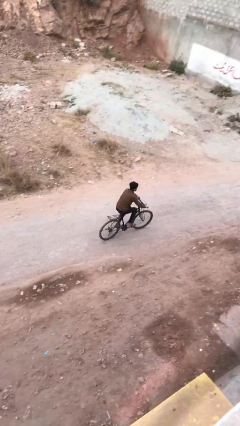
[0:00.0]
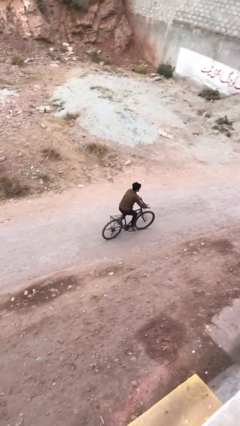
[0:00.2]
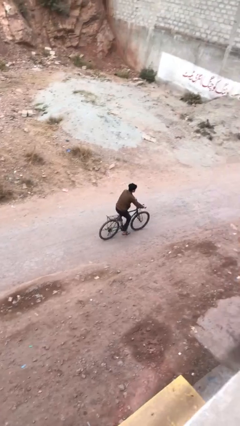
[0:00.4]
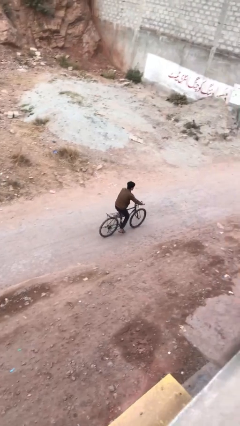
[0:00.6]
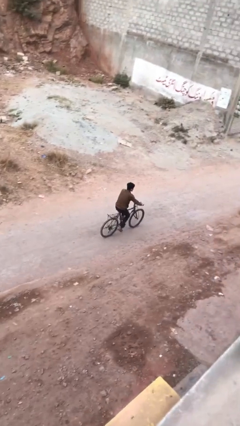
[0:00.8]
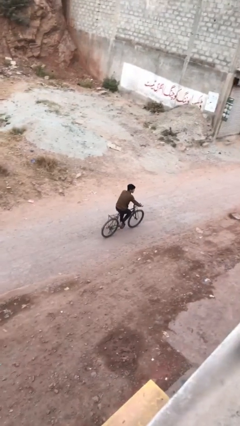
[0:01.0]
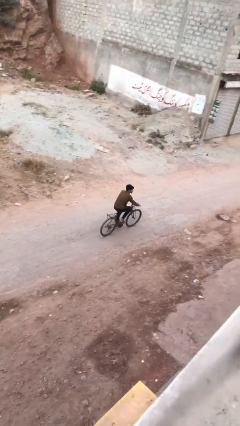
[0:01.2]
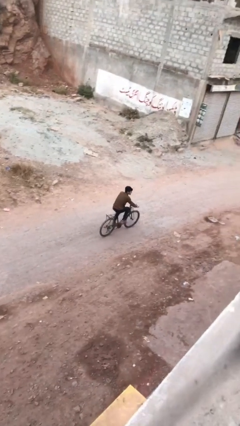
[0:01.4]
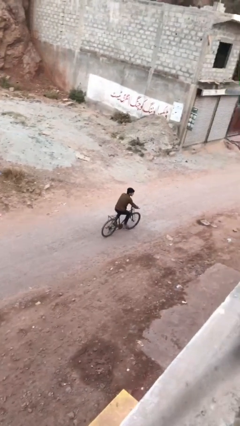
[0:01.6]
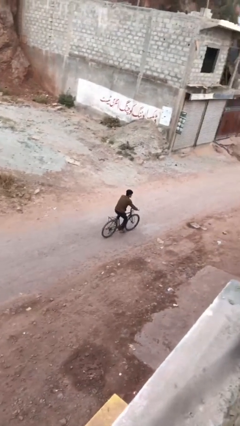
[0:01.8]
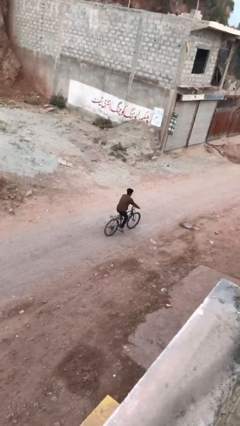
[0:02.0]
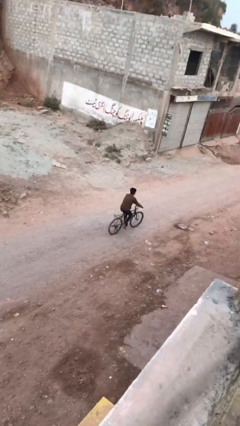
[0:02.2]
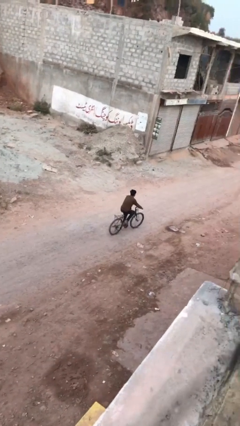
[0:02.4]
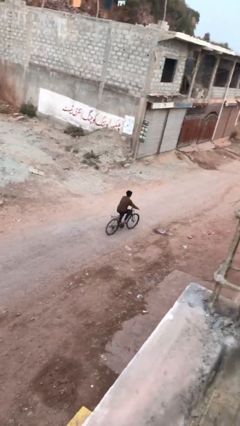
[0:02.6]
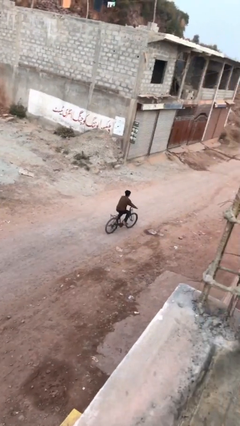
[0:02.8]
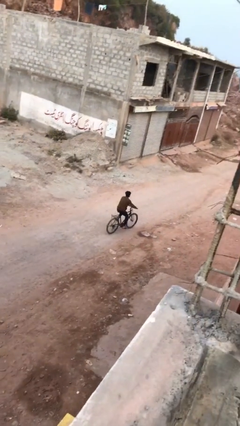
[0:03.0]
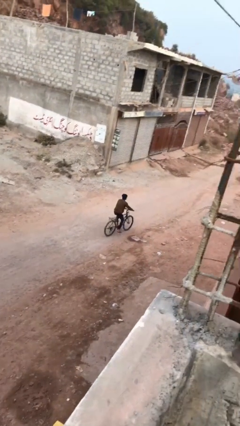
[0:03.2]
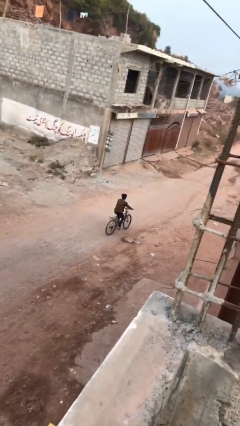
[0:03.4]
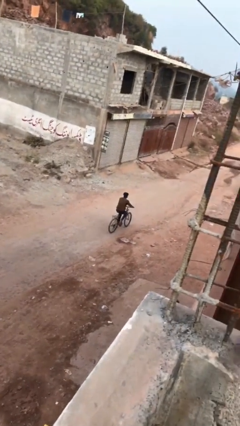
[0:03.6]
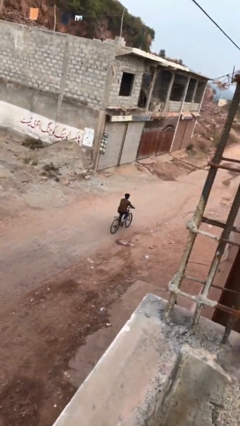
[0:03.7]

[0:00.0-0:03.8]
person rides bicycle

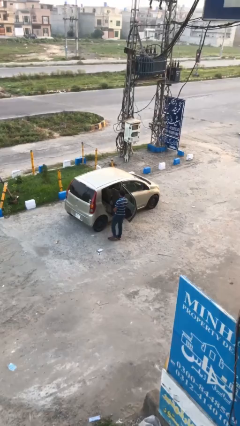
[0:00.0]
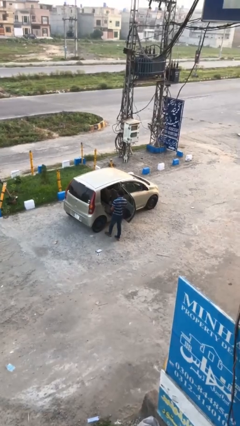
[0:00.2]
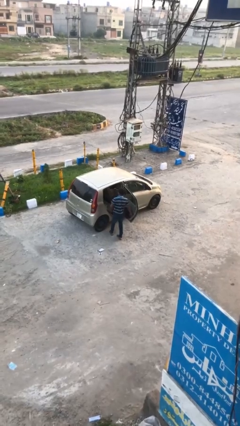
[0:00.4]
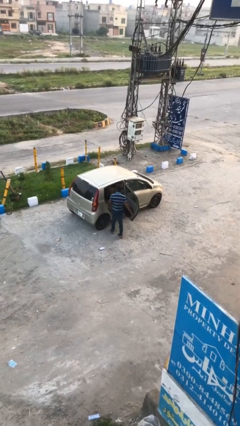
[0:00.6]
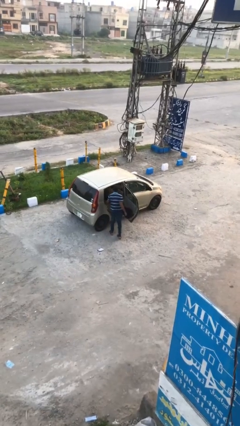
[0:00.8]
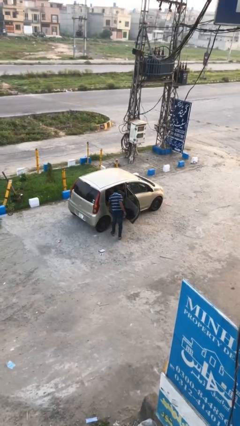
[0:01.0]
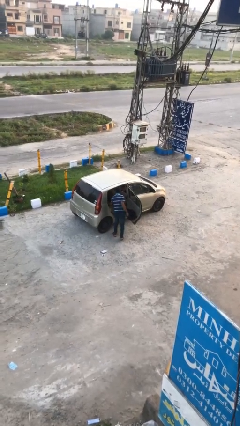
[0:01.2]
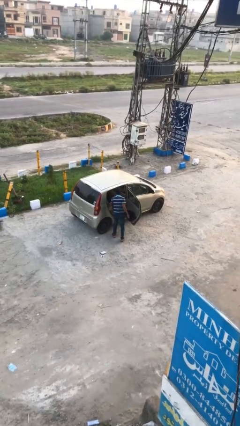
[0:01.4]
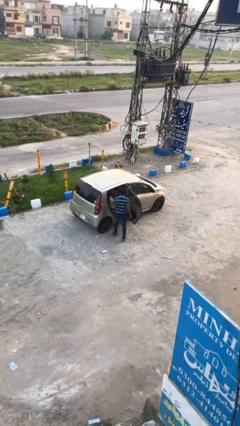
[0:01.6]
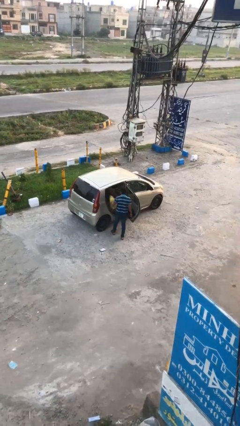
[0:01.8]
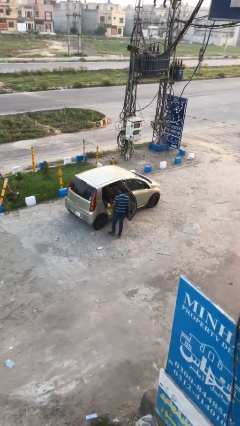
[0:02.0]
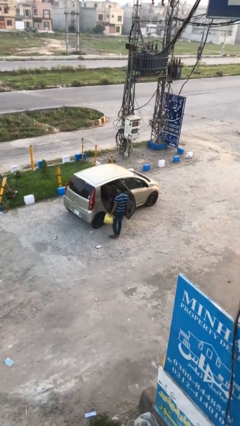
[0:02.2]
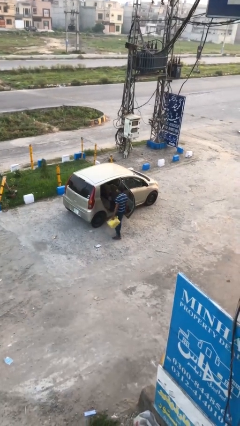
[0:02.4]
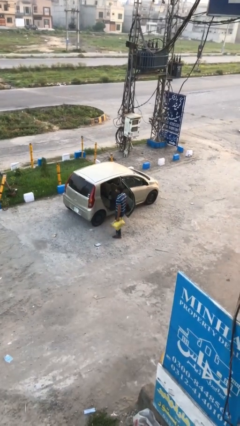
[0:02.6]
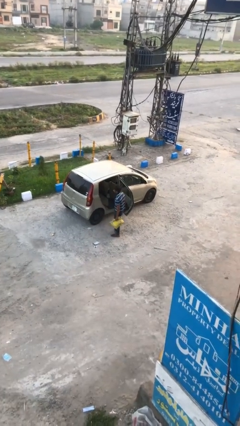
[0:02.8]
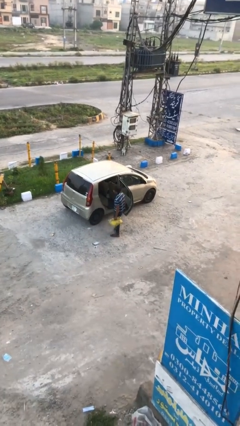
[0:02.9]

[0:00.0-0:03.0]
person unloads car

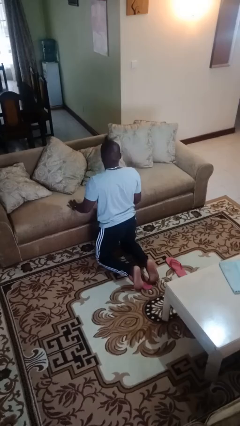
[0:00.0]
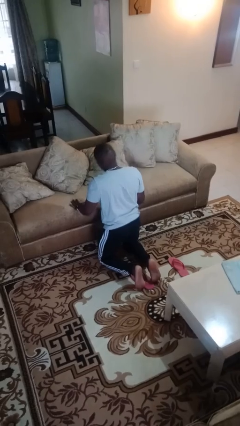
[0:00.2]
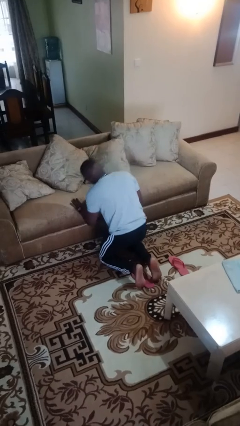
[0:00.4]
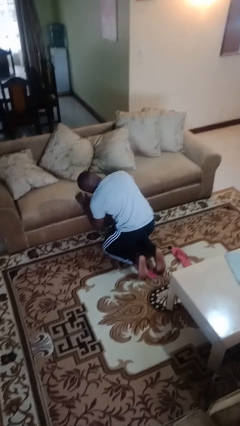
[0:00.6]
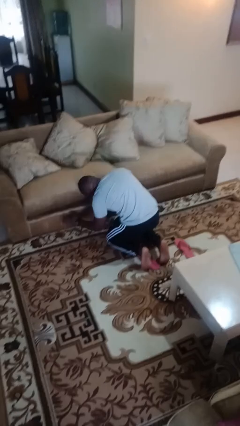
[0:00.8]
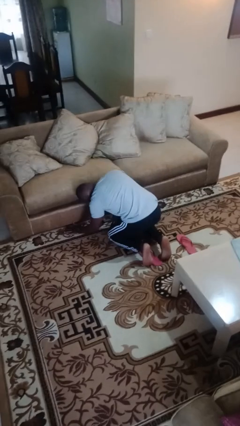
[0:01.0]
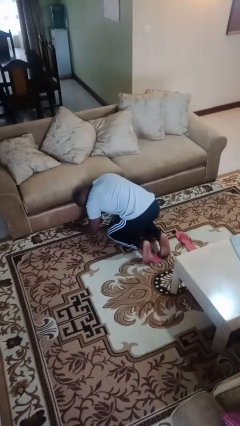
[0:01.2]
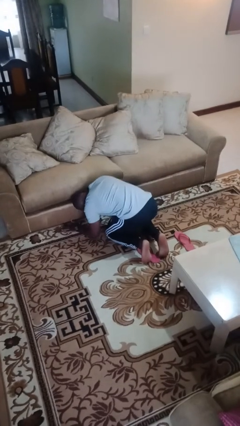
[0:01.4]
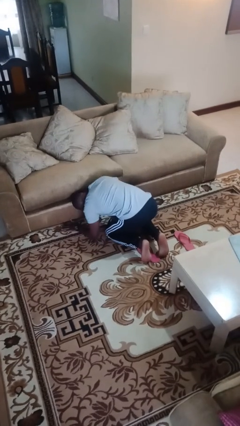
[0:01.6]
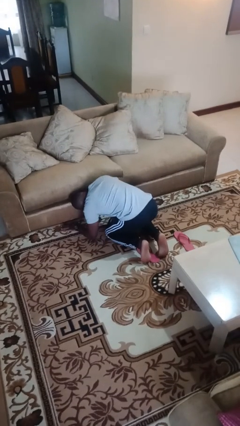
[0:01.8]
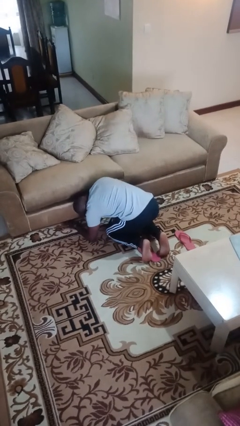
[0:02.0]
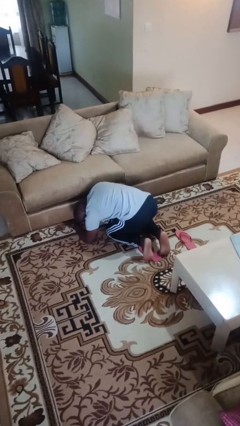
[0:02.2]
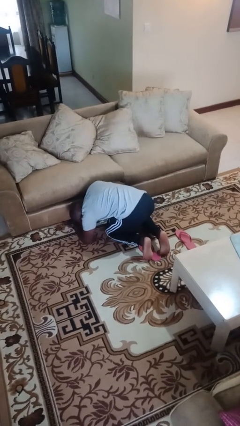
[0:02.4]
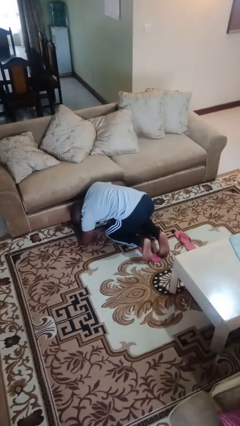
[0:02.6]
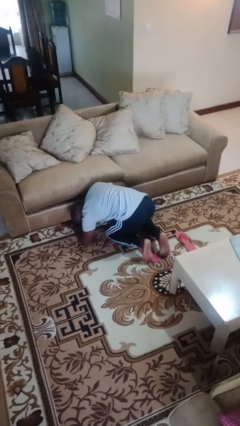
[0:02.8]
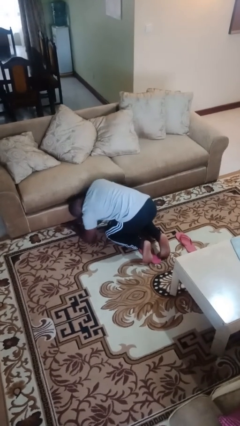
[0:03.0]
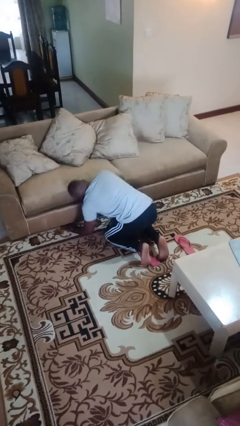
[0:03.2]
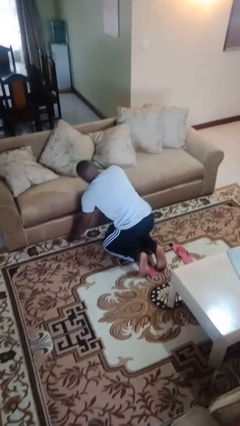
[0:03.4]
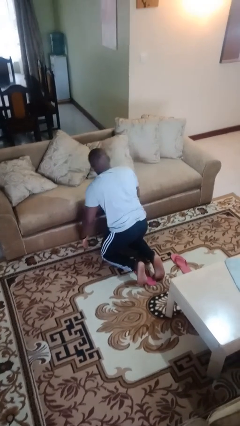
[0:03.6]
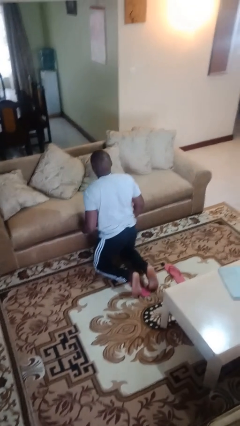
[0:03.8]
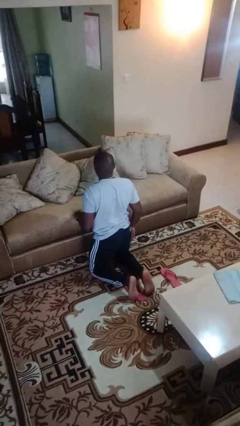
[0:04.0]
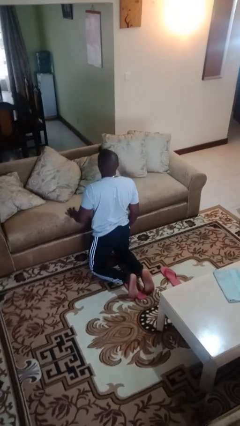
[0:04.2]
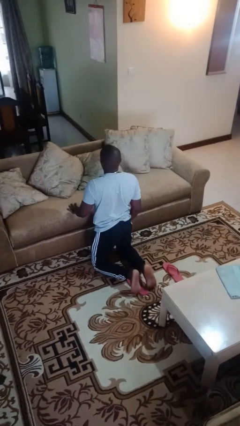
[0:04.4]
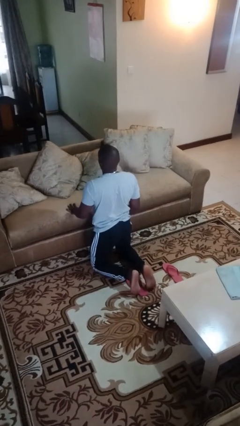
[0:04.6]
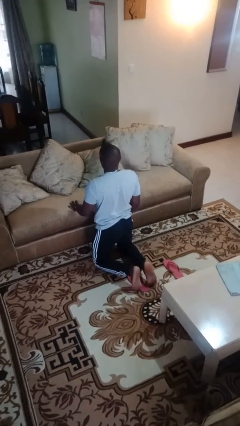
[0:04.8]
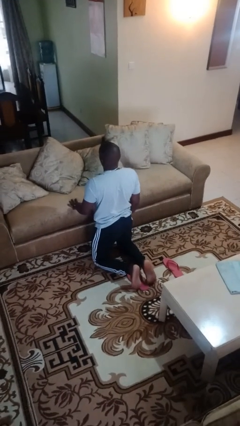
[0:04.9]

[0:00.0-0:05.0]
person searches under couch

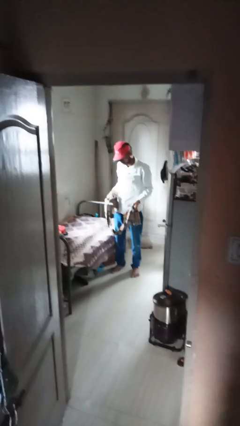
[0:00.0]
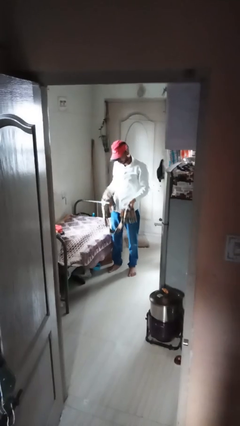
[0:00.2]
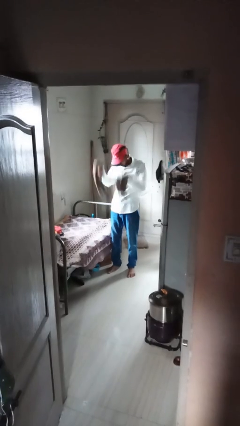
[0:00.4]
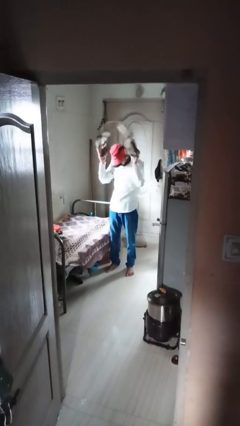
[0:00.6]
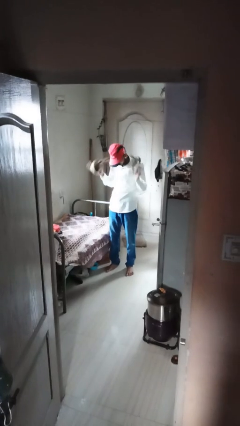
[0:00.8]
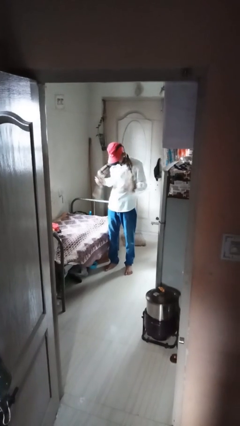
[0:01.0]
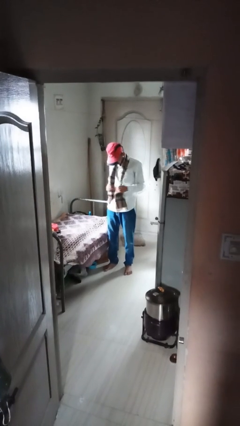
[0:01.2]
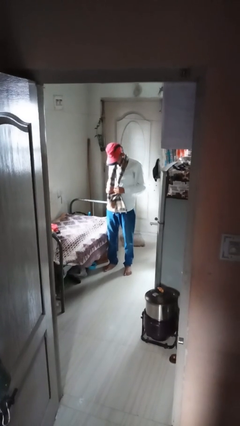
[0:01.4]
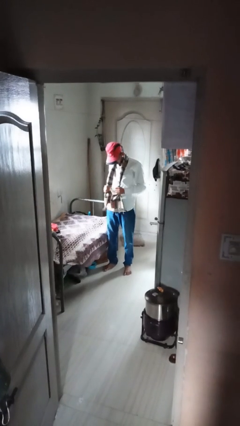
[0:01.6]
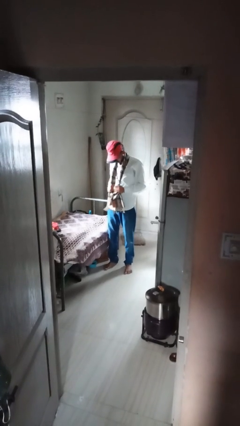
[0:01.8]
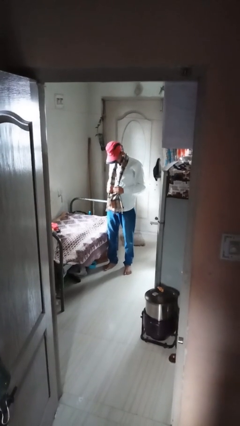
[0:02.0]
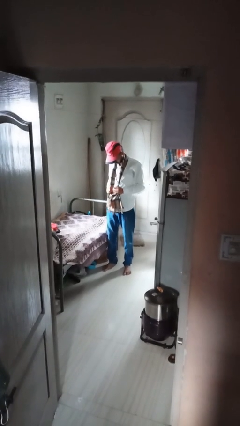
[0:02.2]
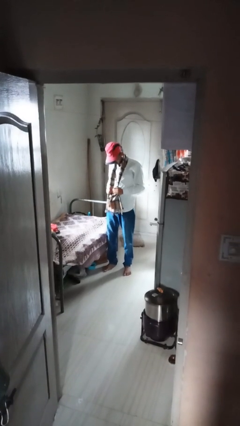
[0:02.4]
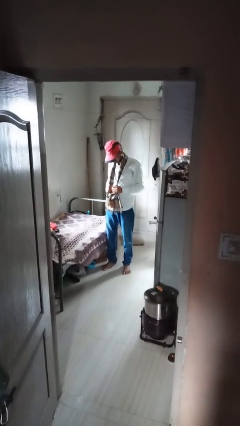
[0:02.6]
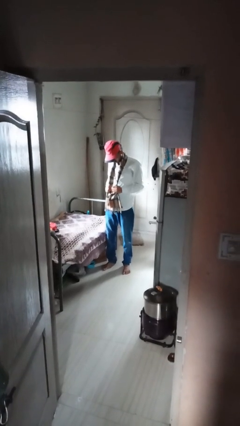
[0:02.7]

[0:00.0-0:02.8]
person puts on scarf

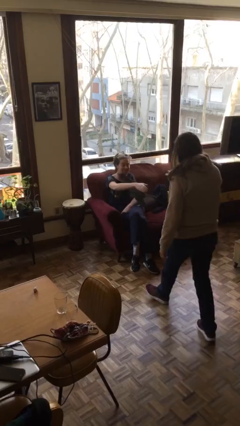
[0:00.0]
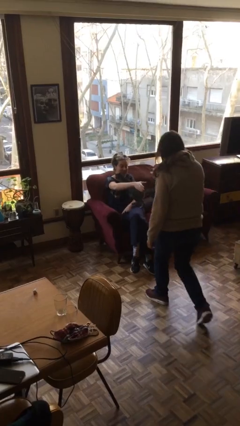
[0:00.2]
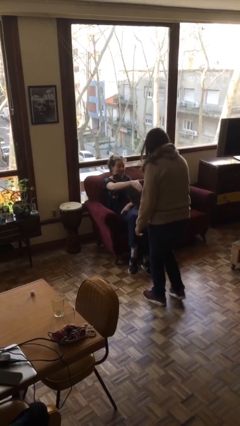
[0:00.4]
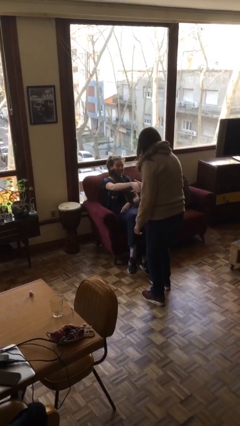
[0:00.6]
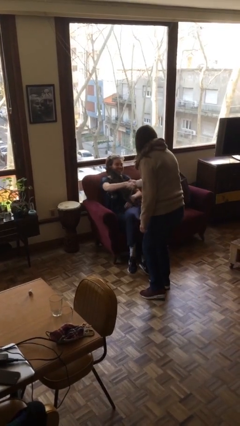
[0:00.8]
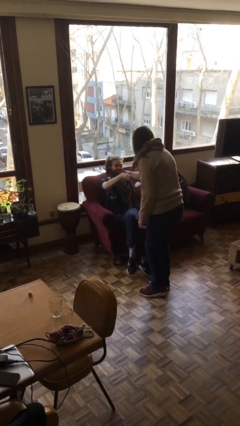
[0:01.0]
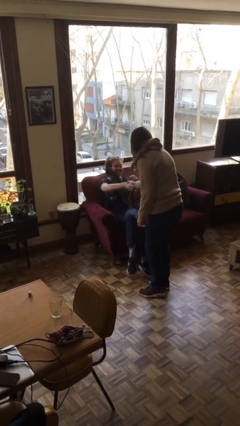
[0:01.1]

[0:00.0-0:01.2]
person shakes hand

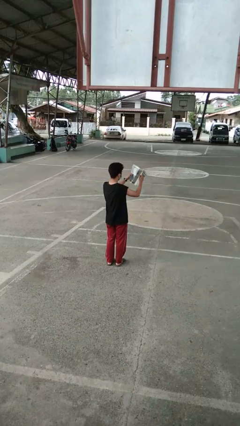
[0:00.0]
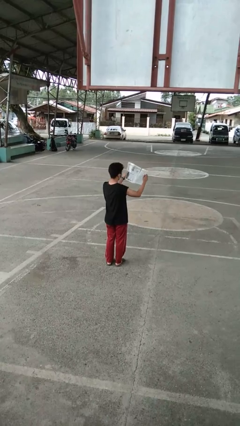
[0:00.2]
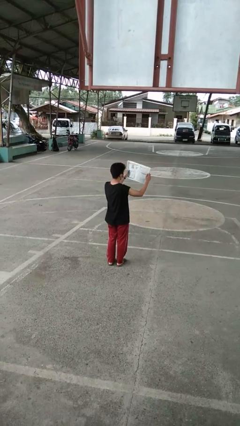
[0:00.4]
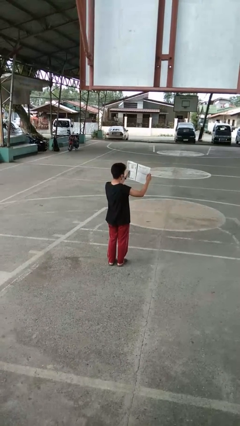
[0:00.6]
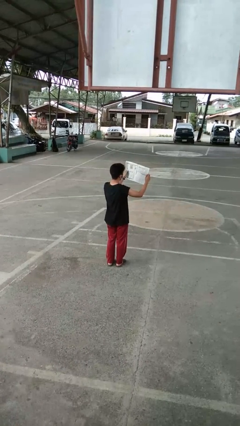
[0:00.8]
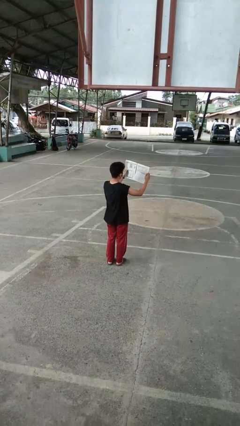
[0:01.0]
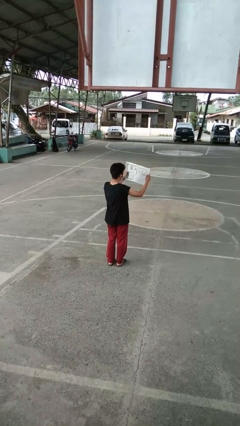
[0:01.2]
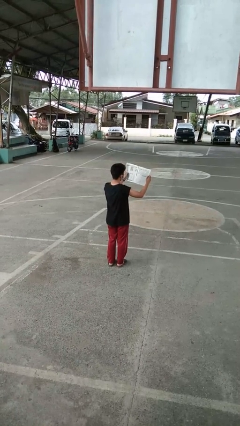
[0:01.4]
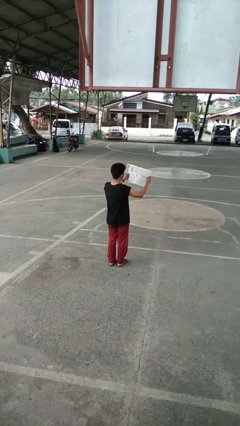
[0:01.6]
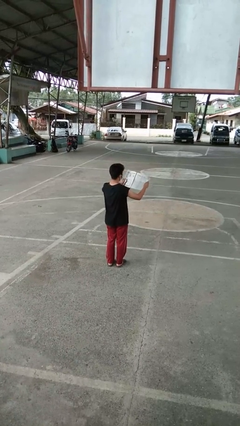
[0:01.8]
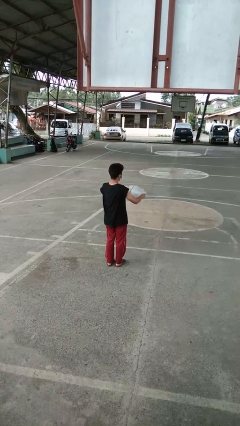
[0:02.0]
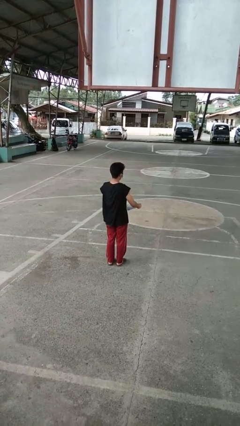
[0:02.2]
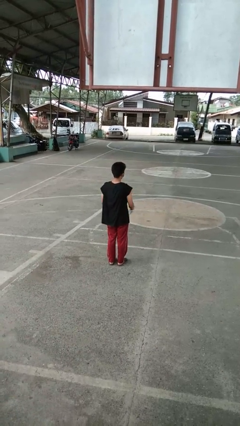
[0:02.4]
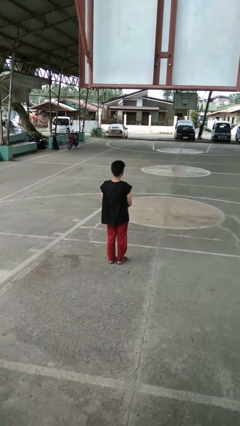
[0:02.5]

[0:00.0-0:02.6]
person reads newspaper
